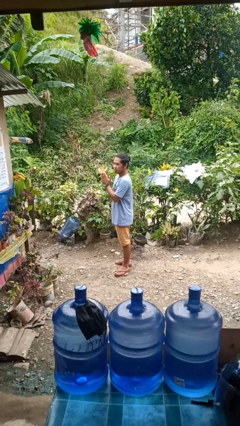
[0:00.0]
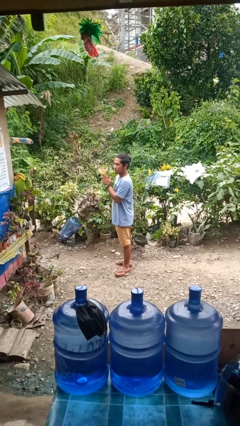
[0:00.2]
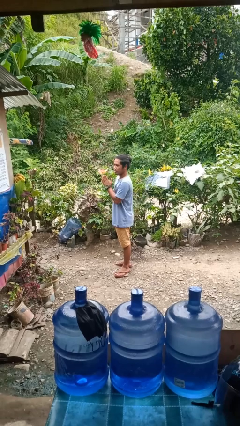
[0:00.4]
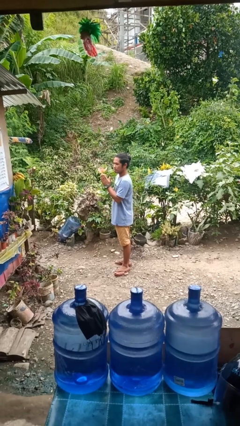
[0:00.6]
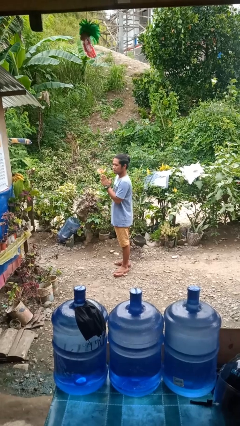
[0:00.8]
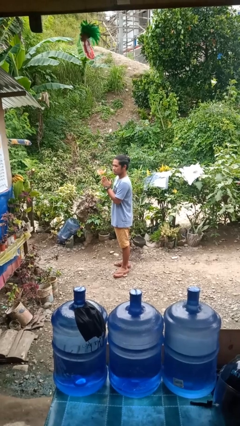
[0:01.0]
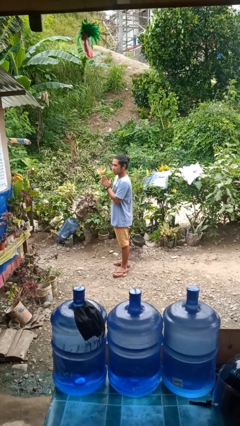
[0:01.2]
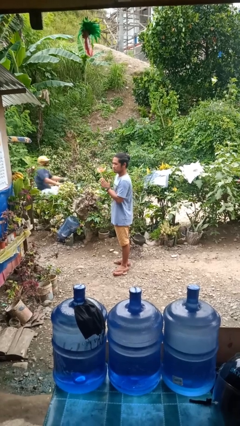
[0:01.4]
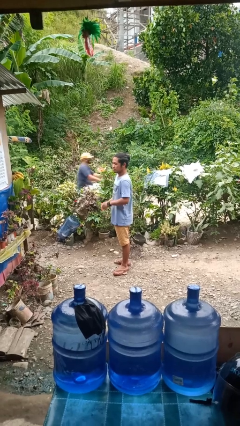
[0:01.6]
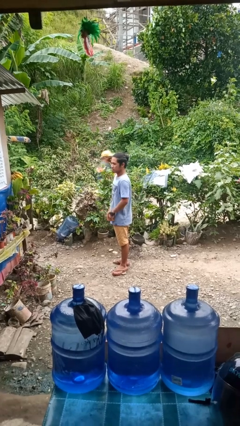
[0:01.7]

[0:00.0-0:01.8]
person claps hands

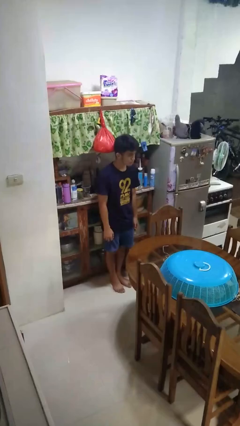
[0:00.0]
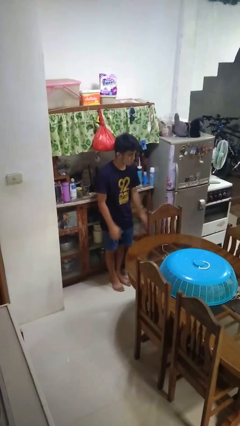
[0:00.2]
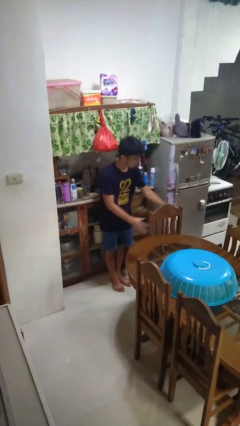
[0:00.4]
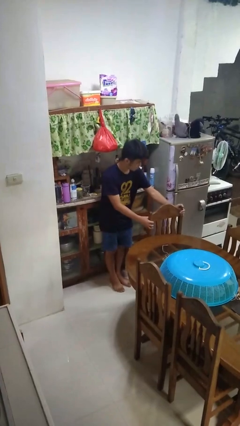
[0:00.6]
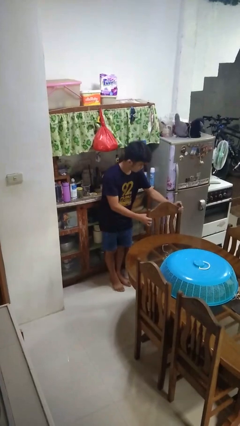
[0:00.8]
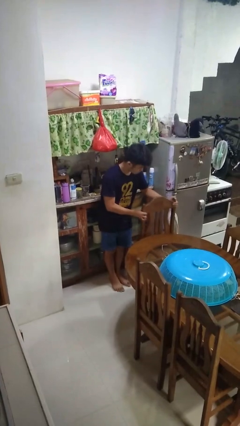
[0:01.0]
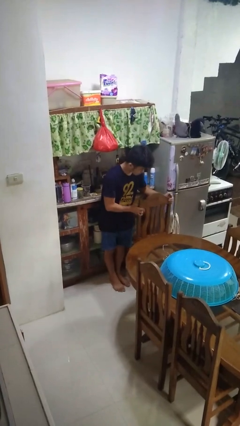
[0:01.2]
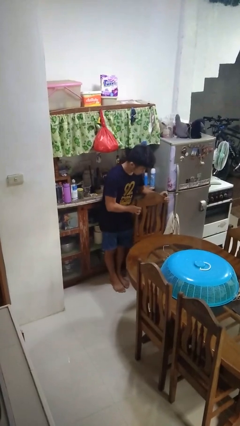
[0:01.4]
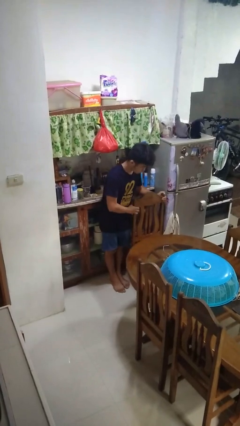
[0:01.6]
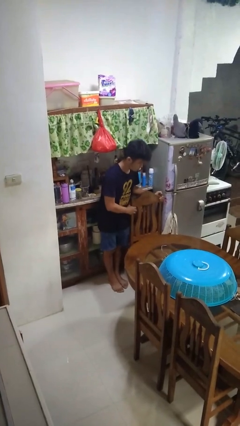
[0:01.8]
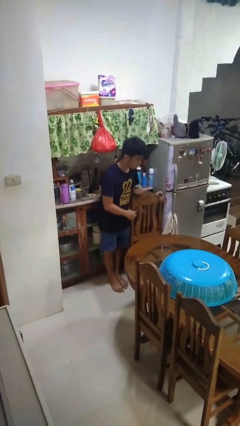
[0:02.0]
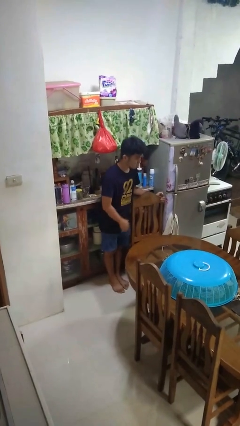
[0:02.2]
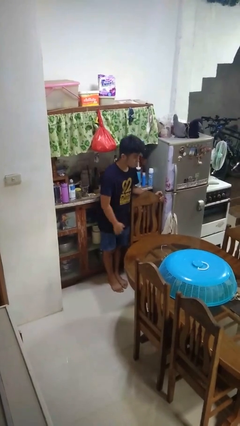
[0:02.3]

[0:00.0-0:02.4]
person pulls out chair

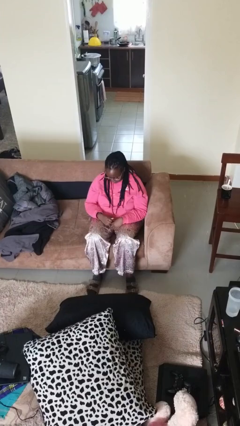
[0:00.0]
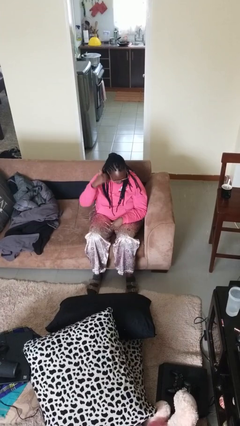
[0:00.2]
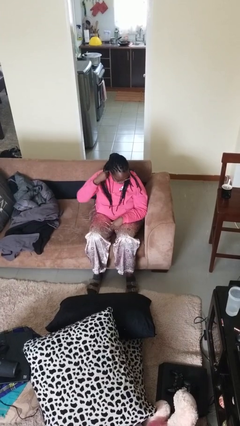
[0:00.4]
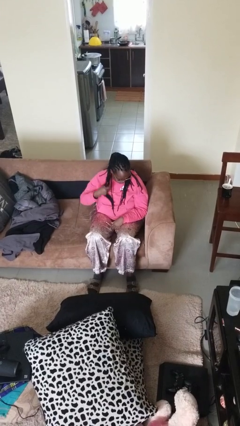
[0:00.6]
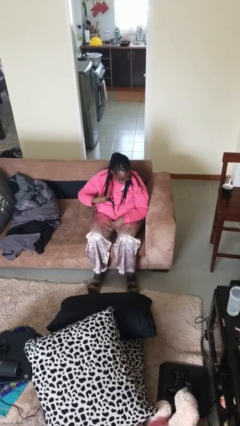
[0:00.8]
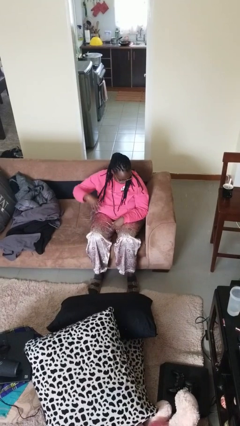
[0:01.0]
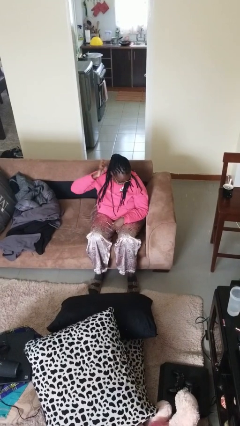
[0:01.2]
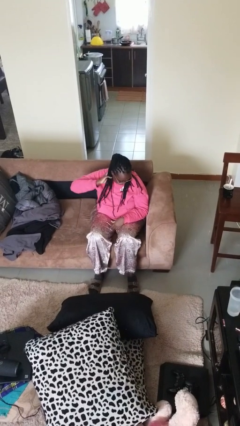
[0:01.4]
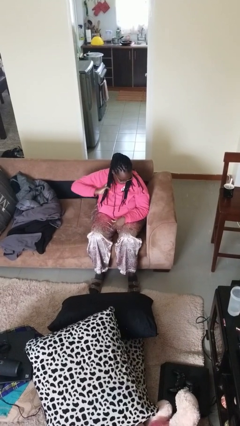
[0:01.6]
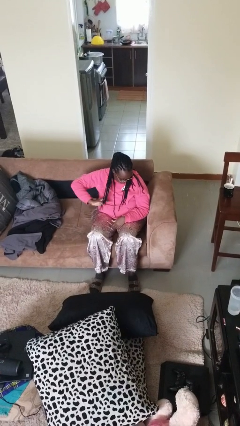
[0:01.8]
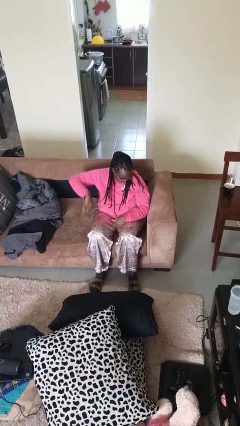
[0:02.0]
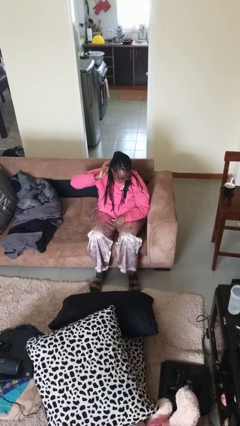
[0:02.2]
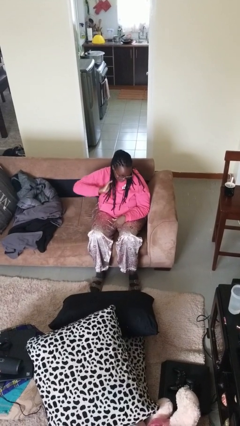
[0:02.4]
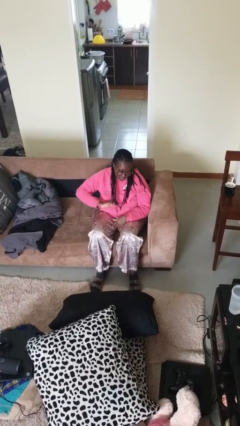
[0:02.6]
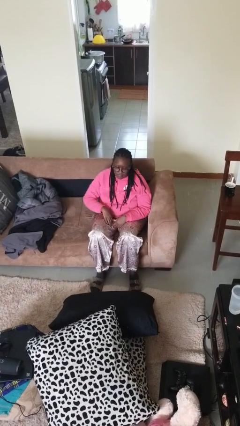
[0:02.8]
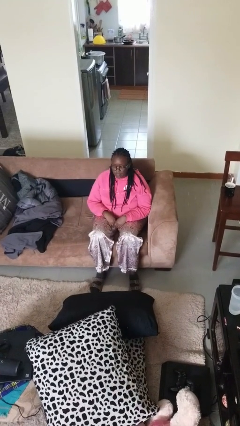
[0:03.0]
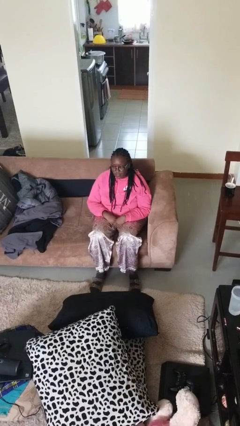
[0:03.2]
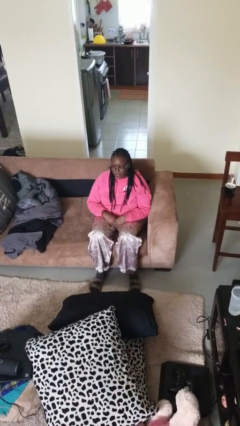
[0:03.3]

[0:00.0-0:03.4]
person strokes hair

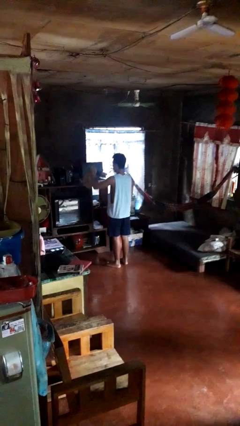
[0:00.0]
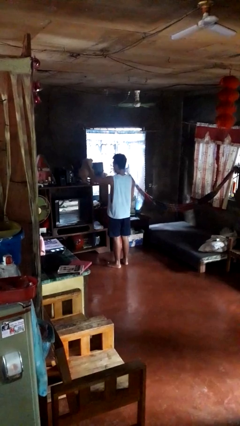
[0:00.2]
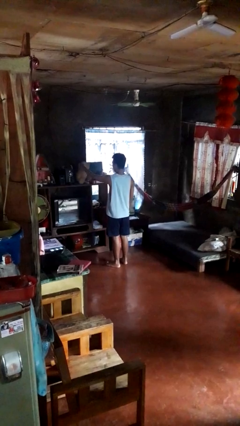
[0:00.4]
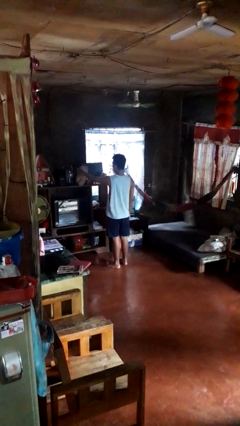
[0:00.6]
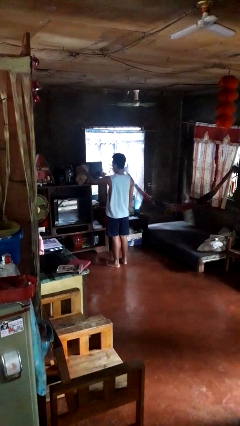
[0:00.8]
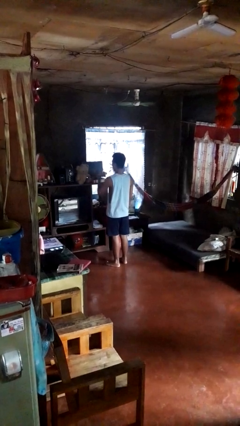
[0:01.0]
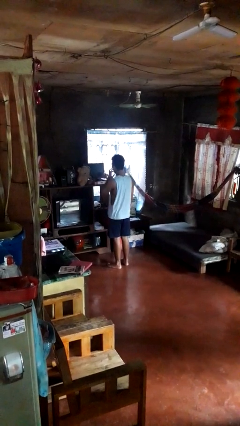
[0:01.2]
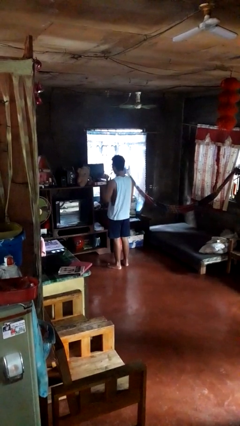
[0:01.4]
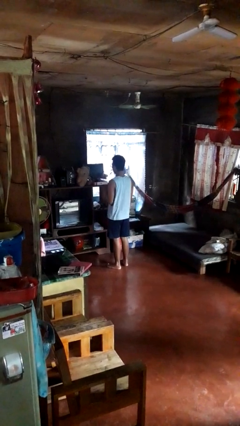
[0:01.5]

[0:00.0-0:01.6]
person puts down object on shelf

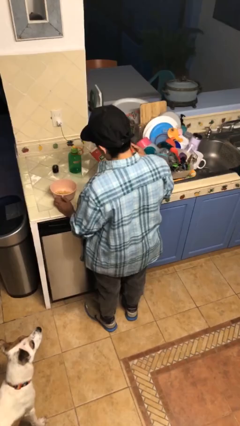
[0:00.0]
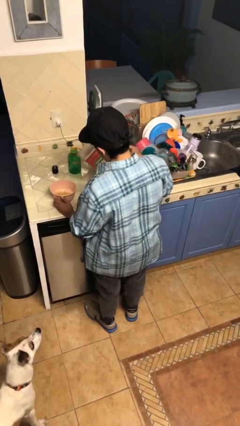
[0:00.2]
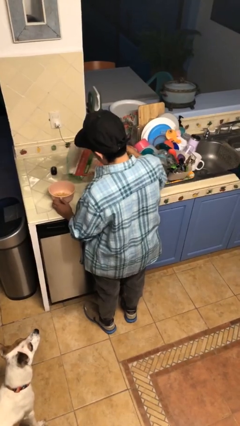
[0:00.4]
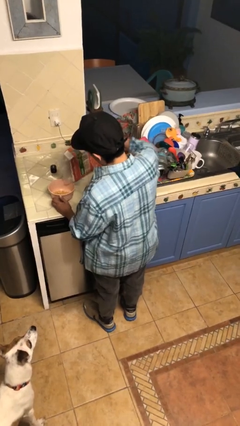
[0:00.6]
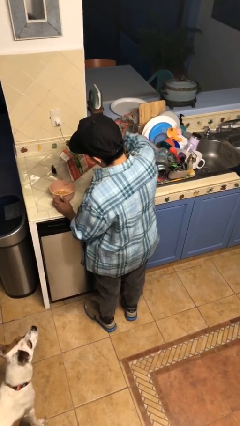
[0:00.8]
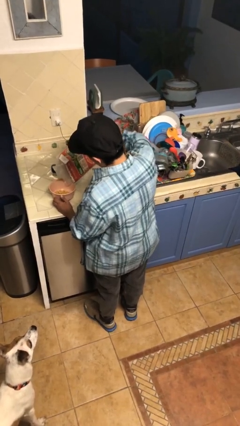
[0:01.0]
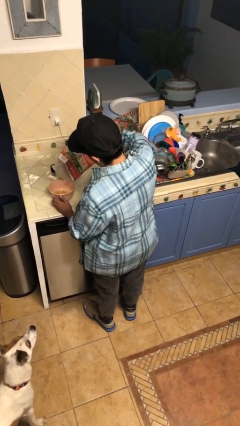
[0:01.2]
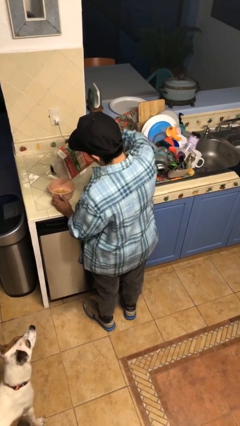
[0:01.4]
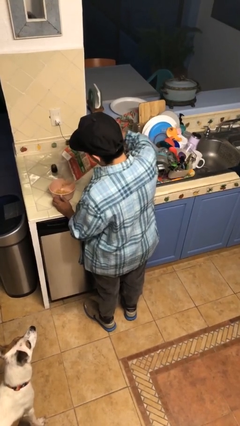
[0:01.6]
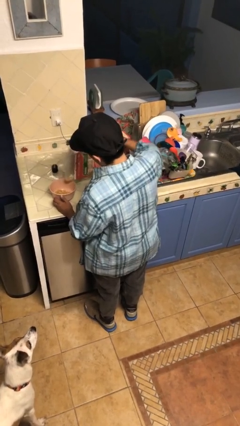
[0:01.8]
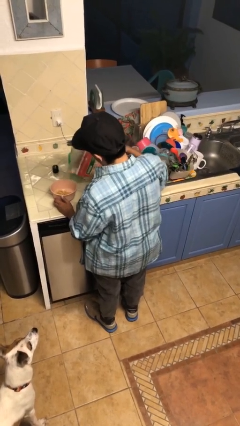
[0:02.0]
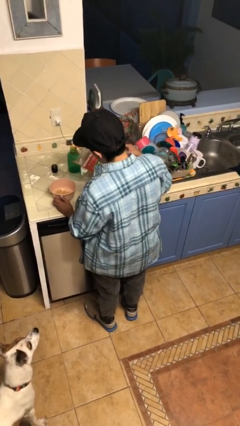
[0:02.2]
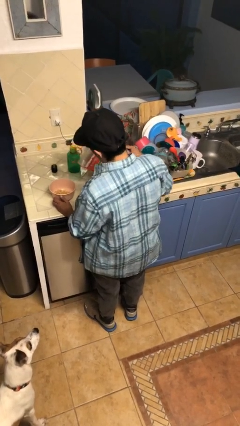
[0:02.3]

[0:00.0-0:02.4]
person pours into bowl

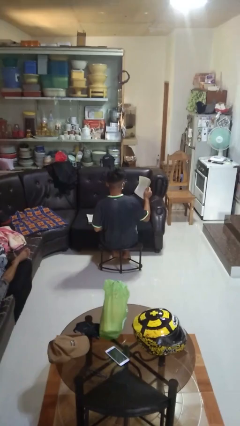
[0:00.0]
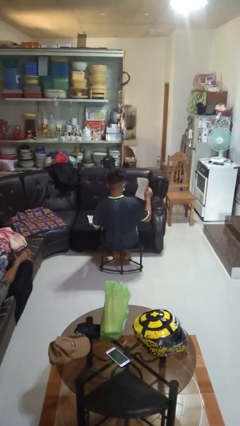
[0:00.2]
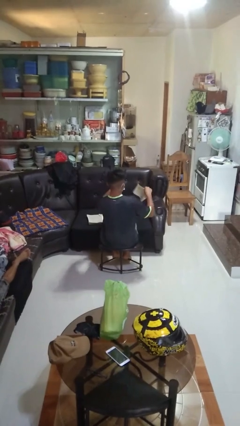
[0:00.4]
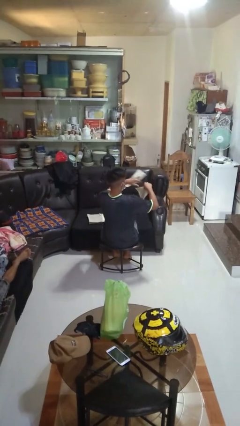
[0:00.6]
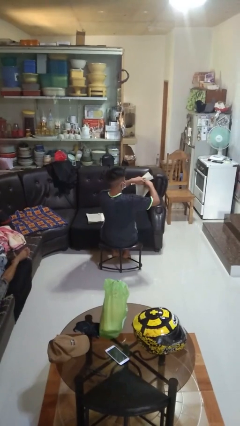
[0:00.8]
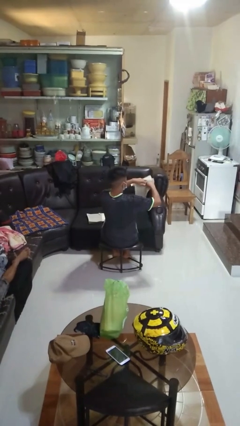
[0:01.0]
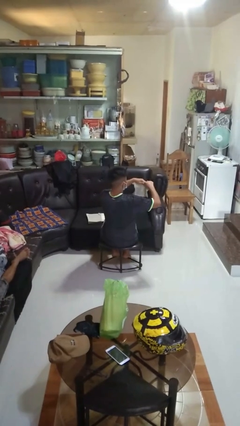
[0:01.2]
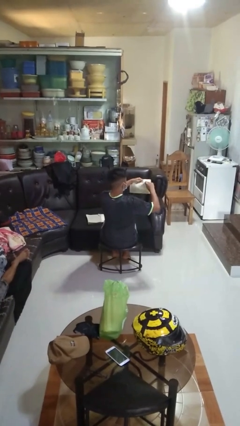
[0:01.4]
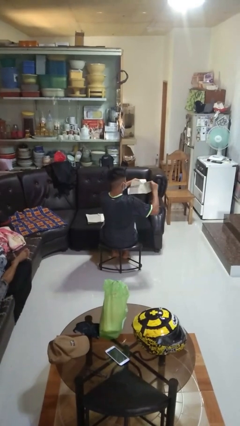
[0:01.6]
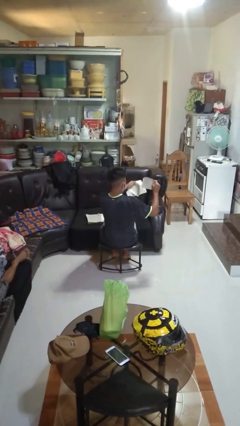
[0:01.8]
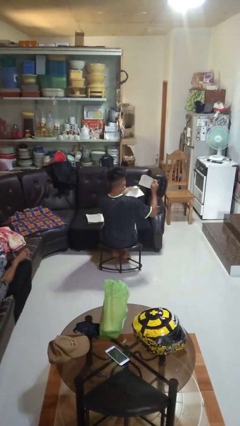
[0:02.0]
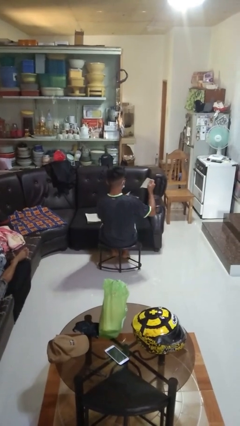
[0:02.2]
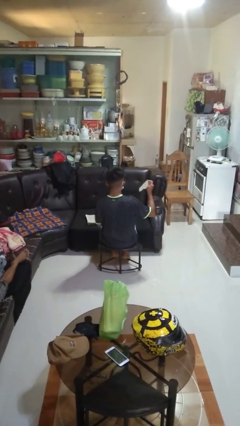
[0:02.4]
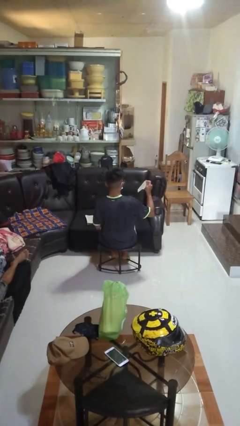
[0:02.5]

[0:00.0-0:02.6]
person tears paper

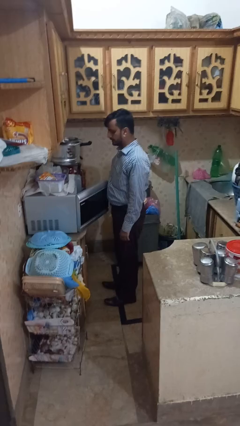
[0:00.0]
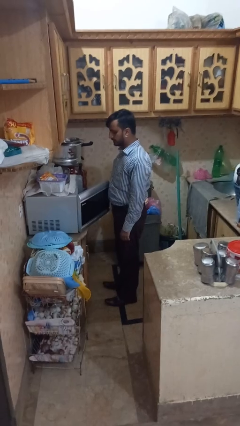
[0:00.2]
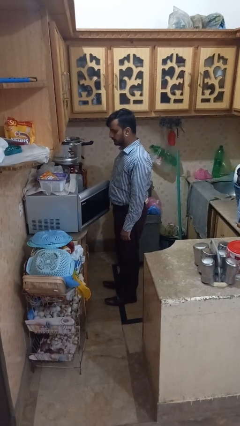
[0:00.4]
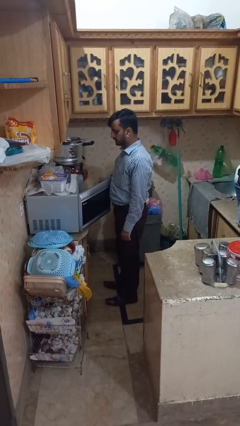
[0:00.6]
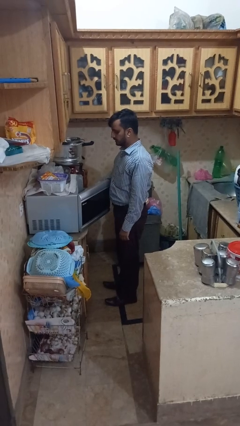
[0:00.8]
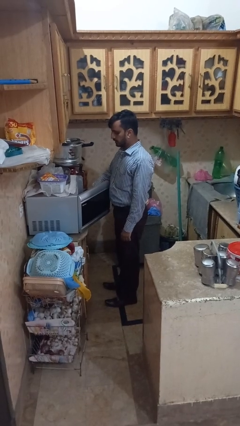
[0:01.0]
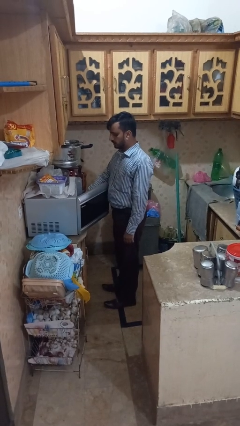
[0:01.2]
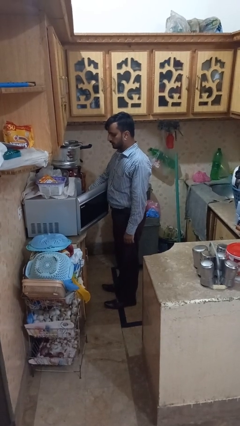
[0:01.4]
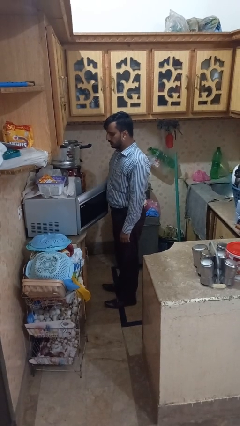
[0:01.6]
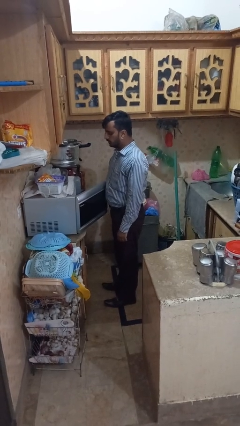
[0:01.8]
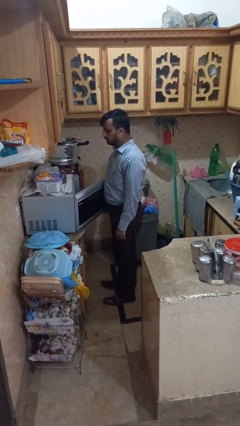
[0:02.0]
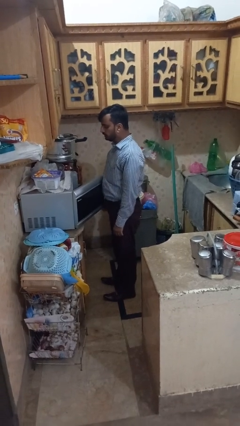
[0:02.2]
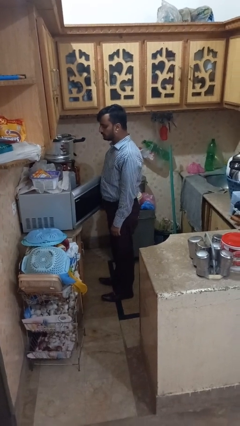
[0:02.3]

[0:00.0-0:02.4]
person puts object into microwave
